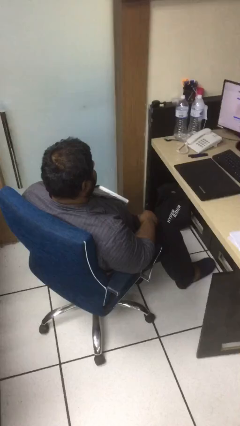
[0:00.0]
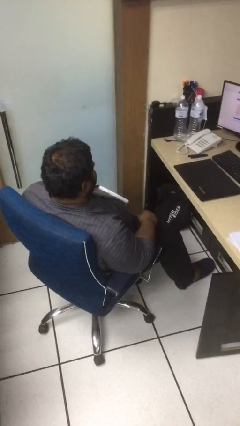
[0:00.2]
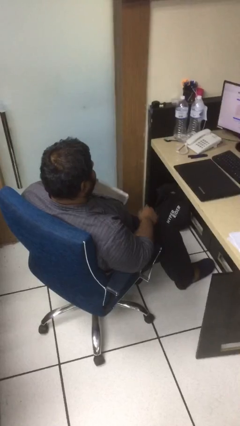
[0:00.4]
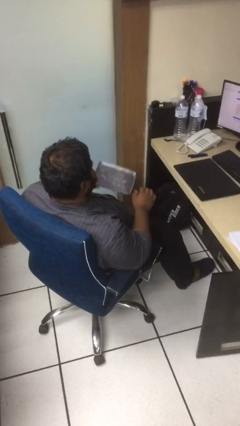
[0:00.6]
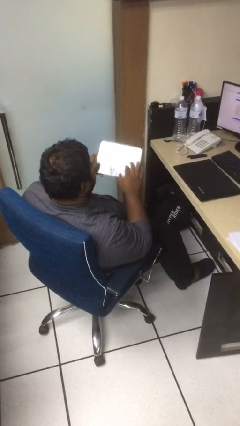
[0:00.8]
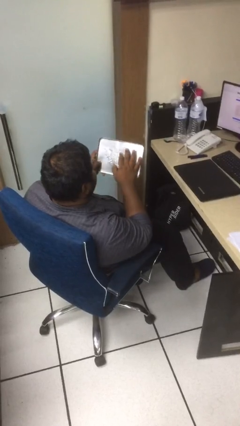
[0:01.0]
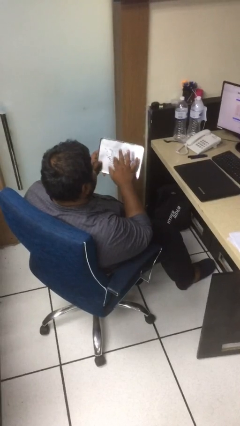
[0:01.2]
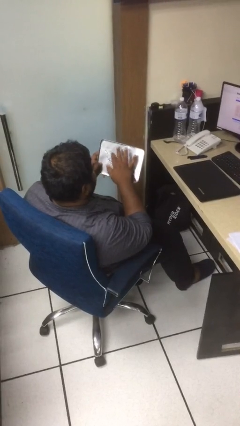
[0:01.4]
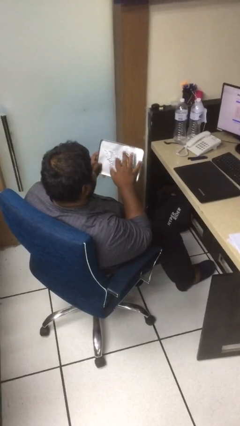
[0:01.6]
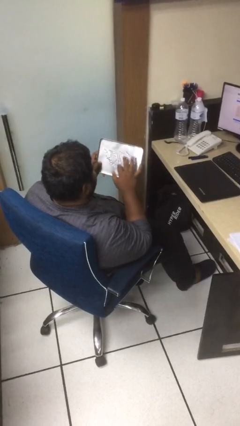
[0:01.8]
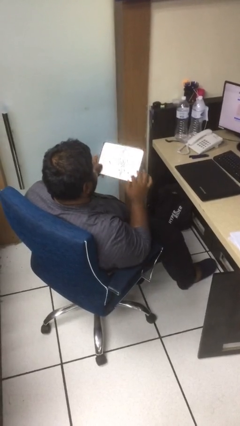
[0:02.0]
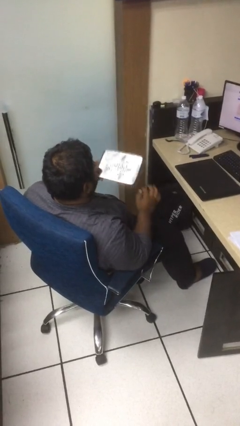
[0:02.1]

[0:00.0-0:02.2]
person interacts with tablet

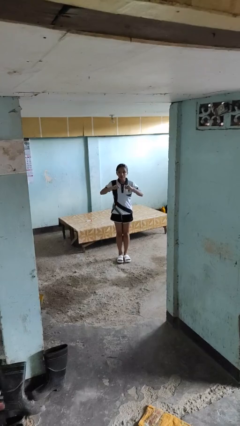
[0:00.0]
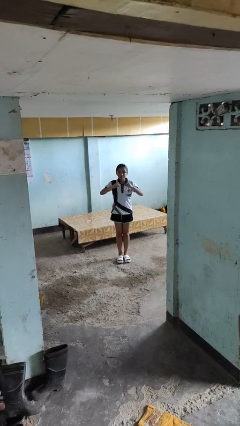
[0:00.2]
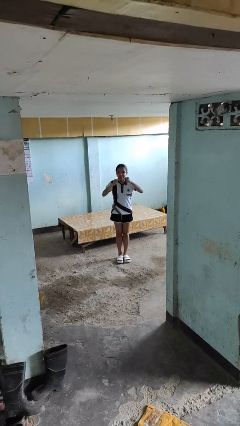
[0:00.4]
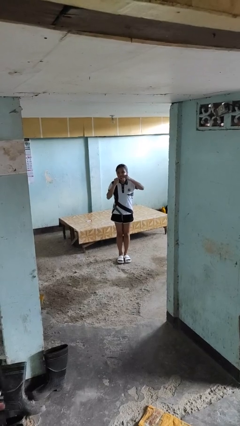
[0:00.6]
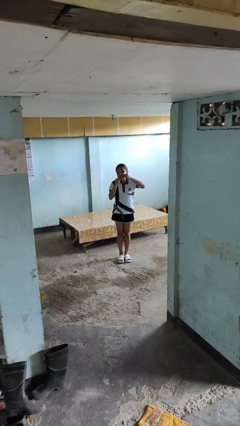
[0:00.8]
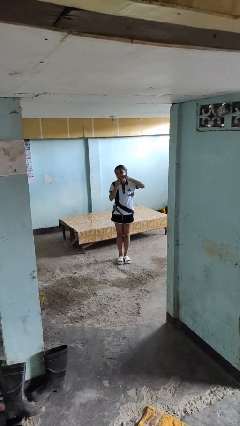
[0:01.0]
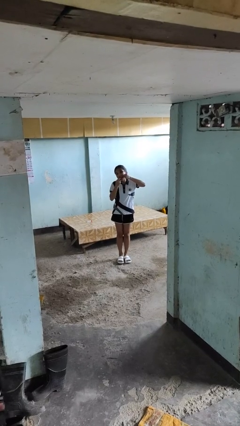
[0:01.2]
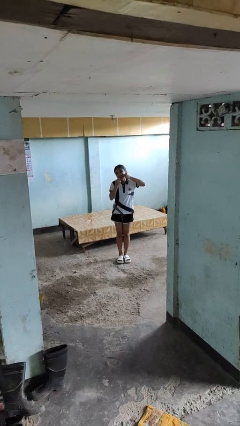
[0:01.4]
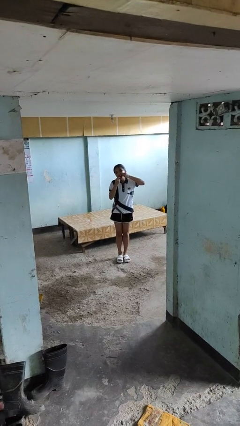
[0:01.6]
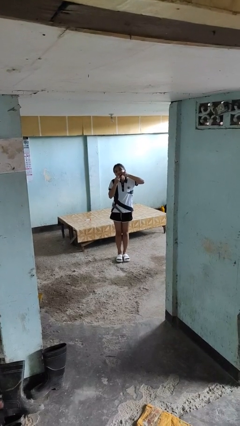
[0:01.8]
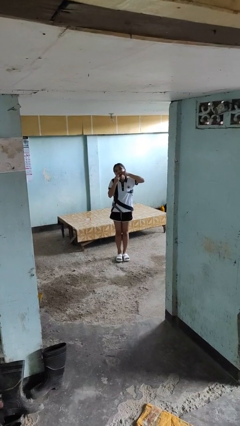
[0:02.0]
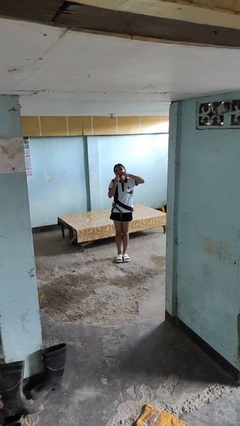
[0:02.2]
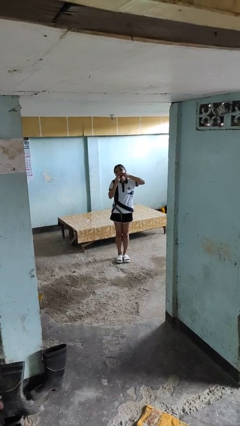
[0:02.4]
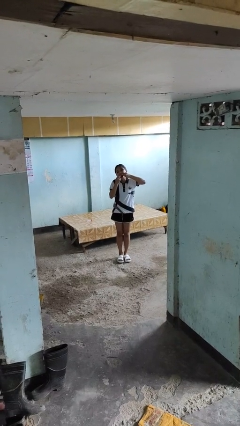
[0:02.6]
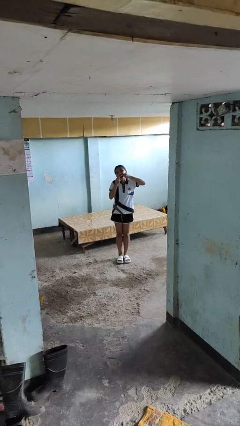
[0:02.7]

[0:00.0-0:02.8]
person flosses

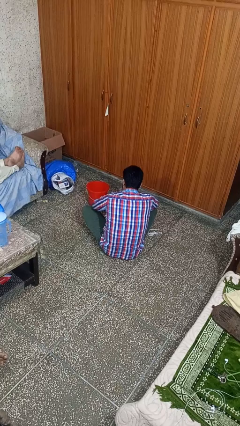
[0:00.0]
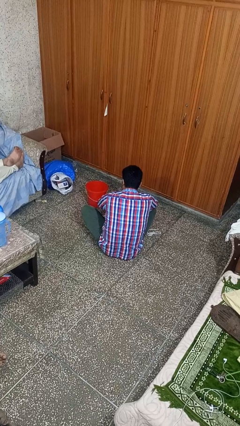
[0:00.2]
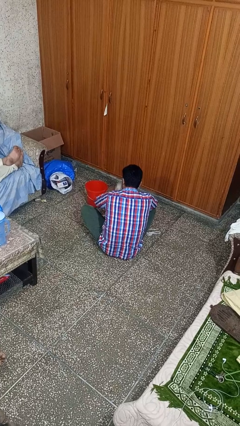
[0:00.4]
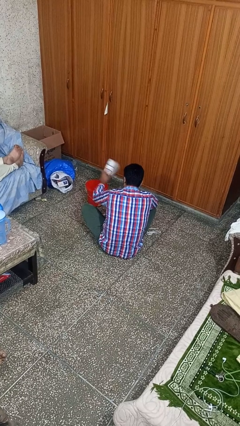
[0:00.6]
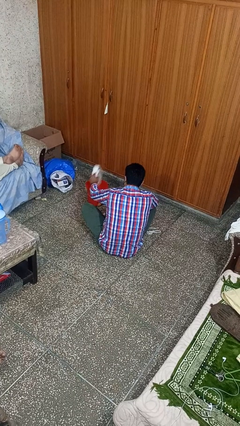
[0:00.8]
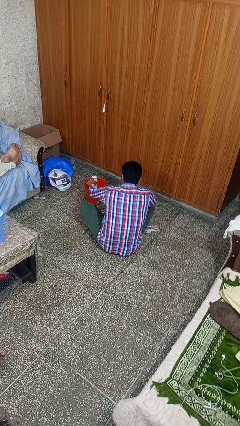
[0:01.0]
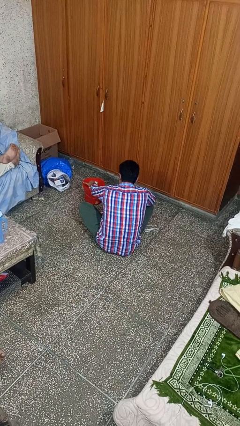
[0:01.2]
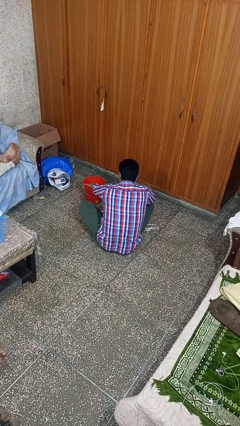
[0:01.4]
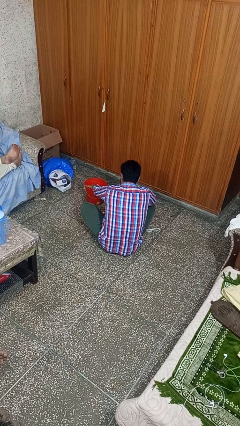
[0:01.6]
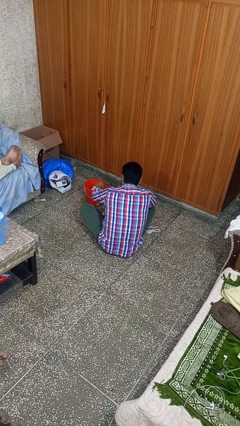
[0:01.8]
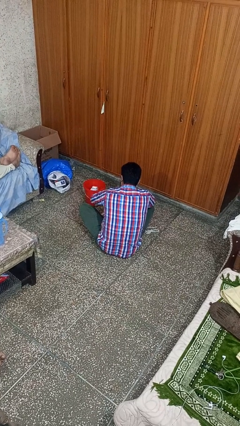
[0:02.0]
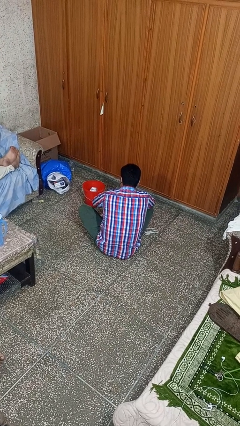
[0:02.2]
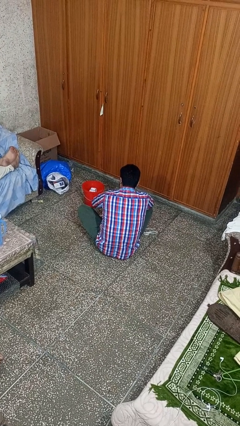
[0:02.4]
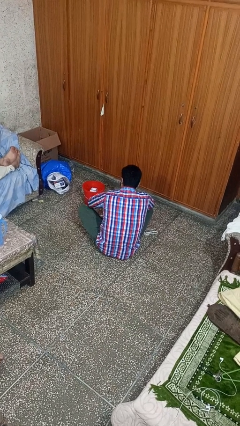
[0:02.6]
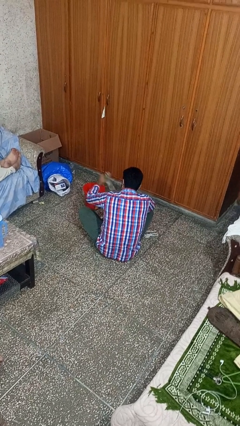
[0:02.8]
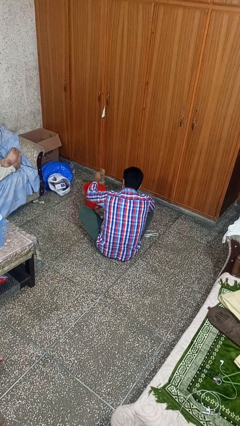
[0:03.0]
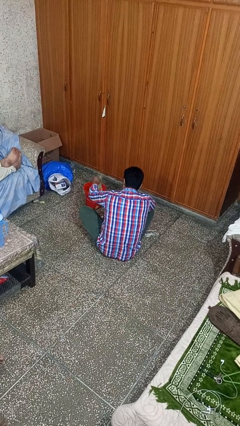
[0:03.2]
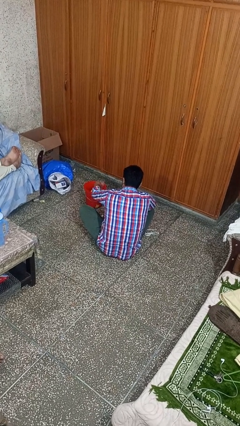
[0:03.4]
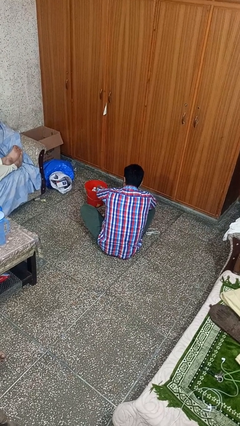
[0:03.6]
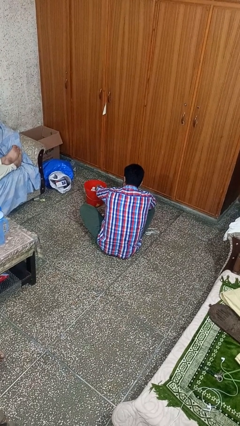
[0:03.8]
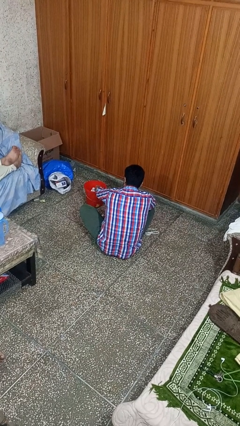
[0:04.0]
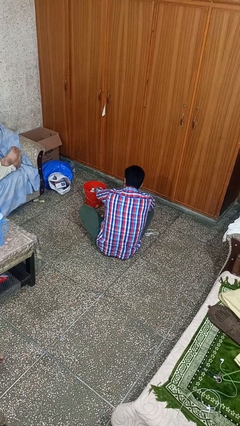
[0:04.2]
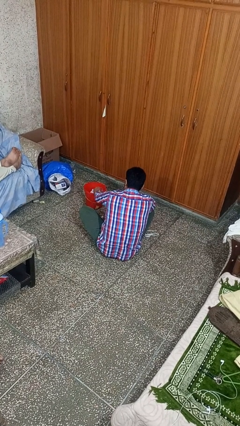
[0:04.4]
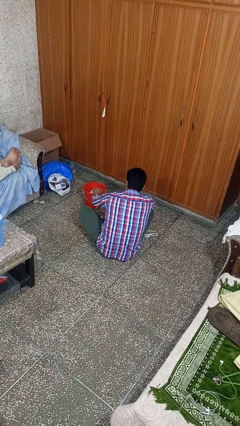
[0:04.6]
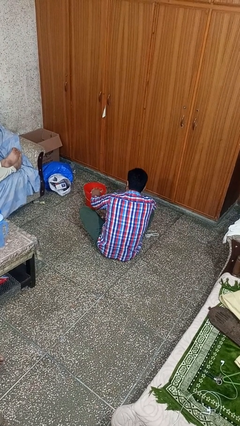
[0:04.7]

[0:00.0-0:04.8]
person puts object into basket

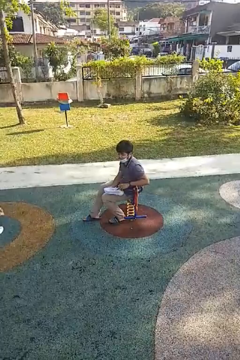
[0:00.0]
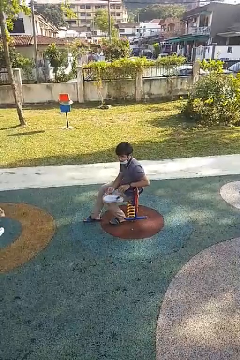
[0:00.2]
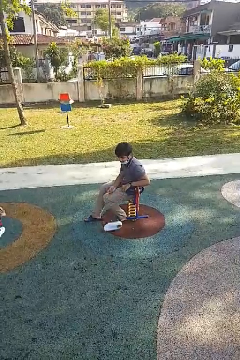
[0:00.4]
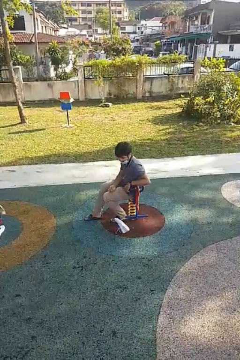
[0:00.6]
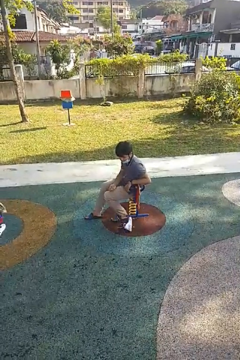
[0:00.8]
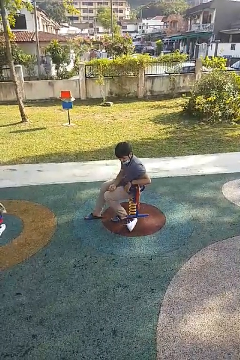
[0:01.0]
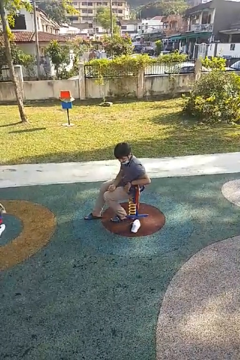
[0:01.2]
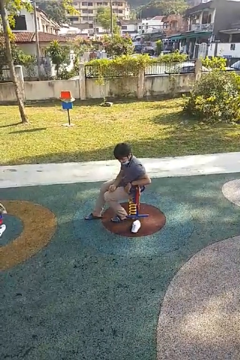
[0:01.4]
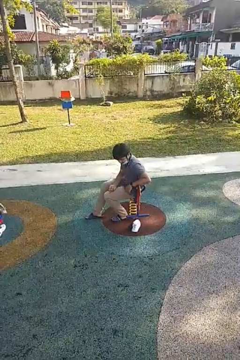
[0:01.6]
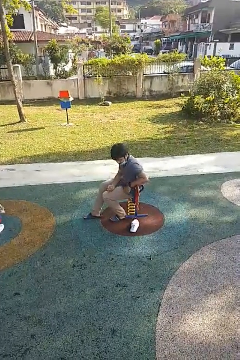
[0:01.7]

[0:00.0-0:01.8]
person drops object

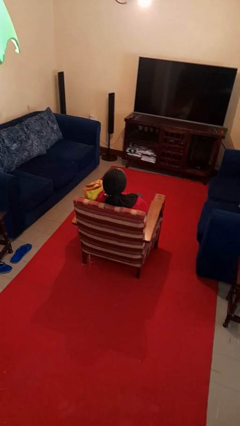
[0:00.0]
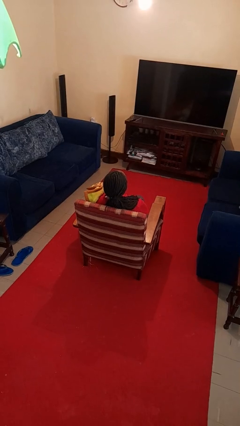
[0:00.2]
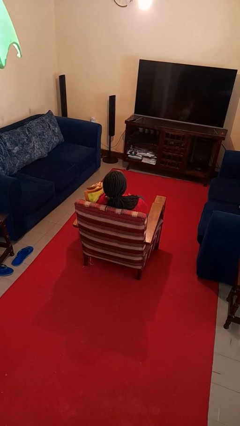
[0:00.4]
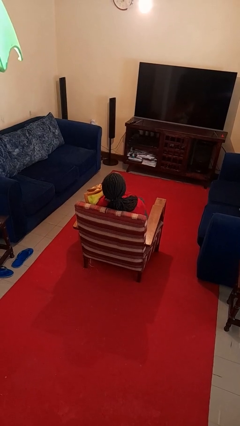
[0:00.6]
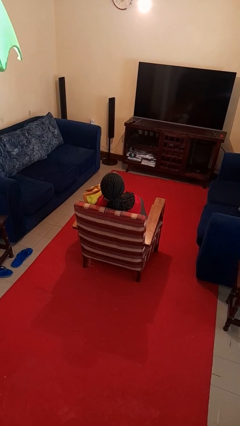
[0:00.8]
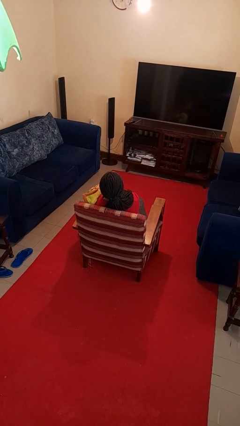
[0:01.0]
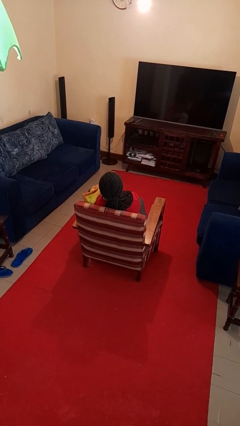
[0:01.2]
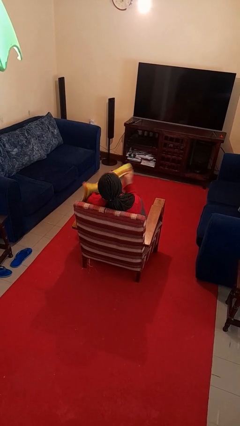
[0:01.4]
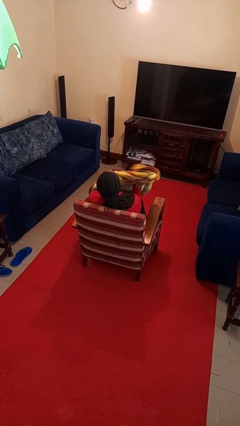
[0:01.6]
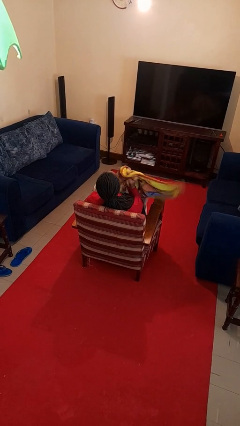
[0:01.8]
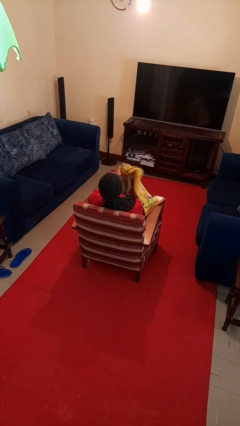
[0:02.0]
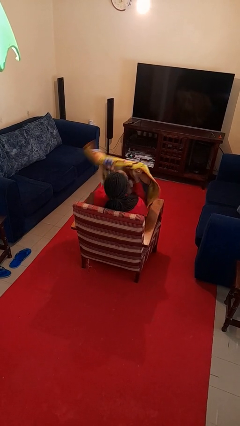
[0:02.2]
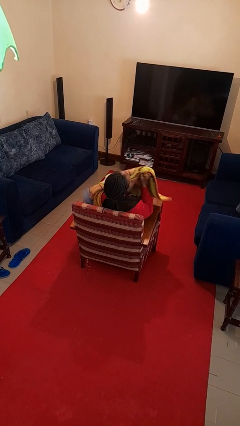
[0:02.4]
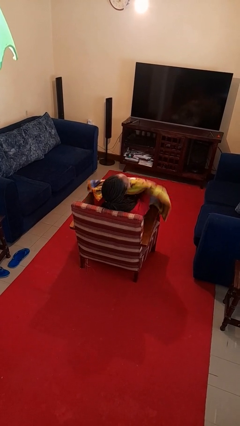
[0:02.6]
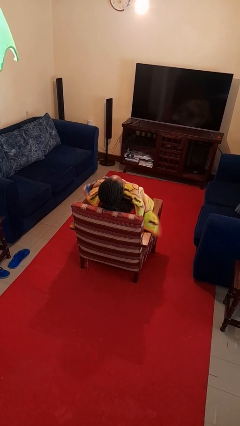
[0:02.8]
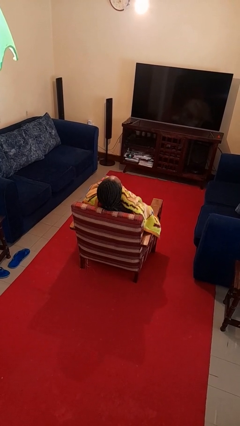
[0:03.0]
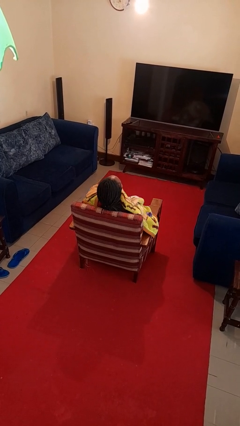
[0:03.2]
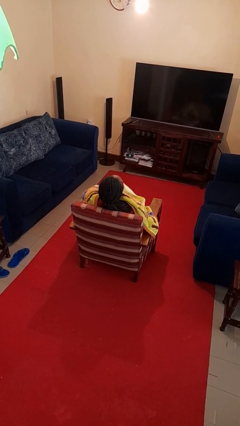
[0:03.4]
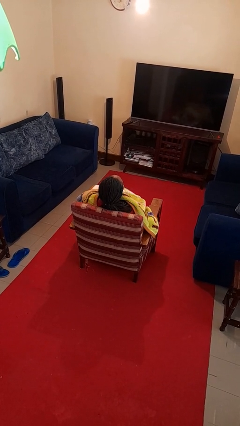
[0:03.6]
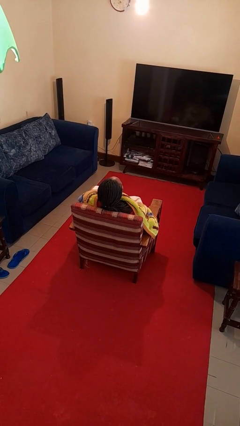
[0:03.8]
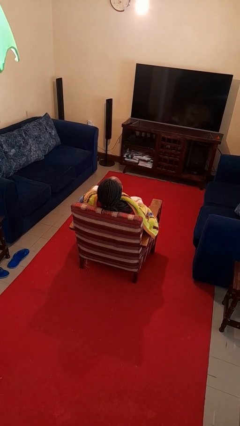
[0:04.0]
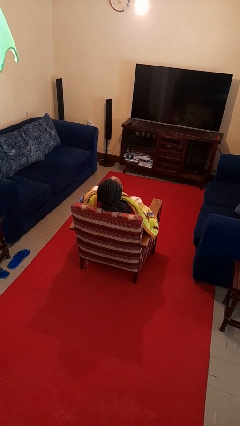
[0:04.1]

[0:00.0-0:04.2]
person covers with blanket

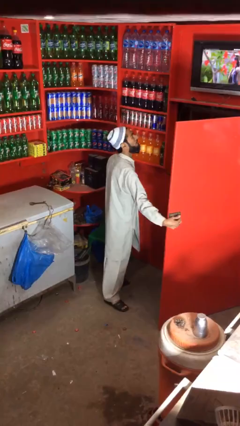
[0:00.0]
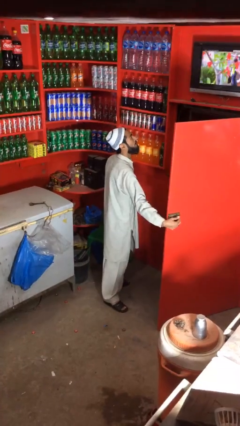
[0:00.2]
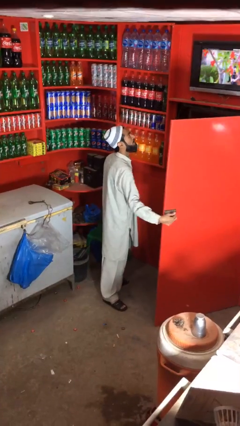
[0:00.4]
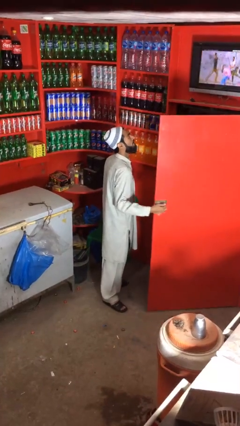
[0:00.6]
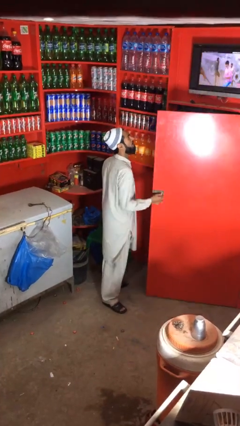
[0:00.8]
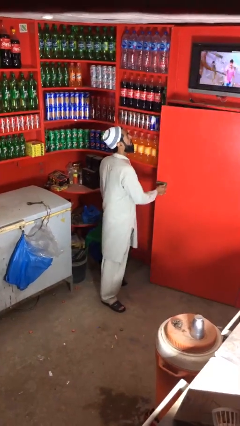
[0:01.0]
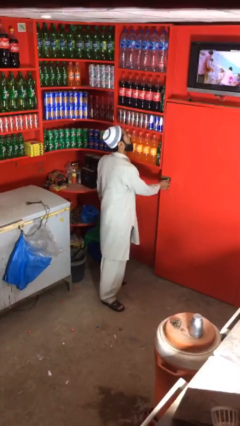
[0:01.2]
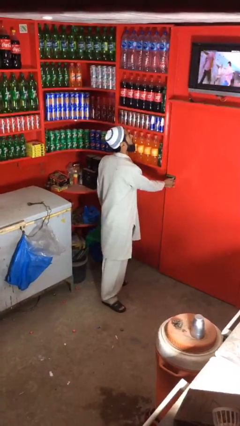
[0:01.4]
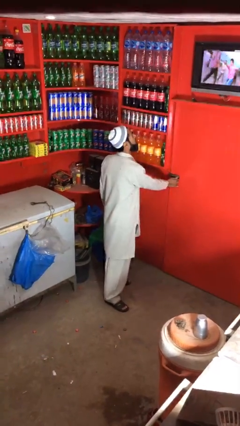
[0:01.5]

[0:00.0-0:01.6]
person closes facility door
